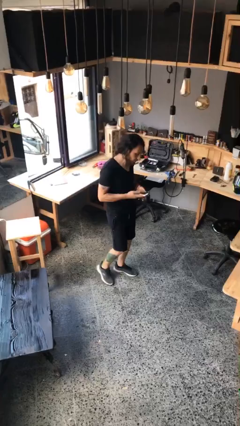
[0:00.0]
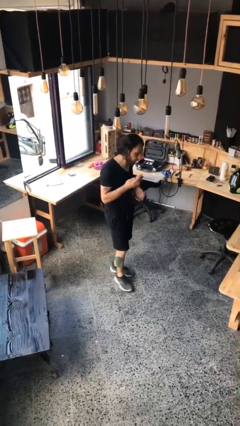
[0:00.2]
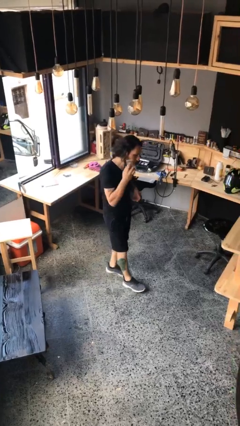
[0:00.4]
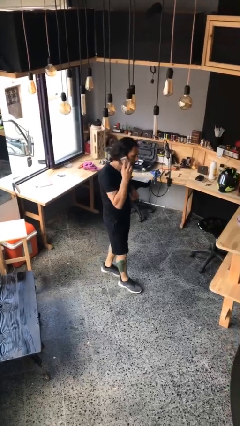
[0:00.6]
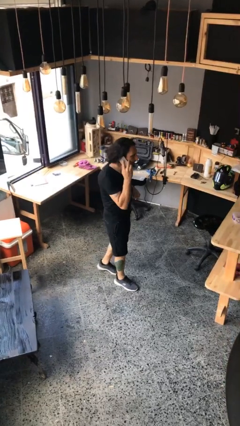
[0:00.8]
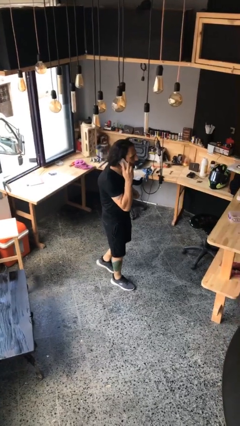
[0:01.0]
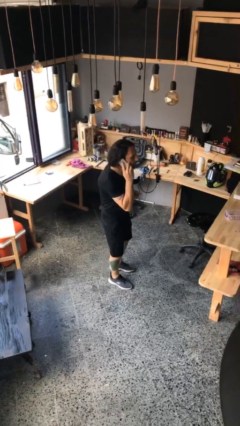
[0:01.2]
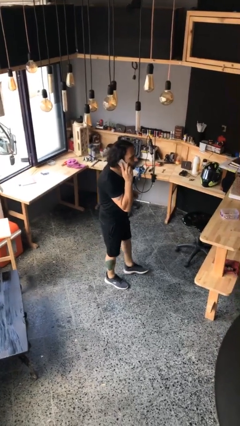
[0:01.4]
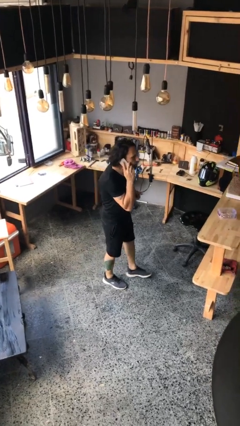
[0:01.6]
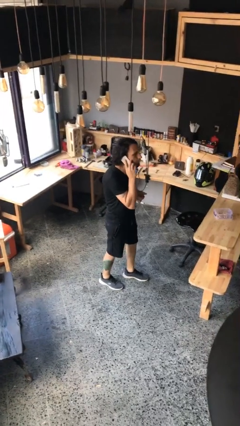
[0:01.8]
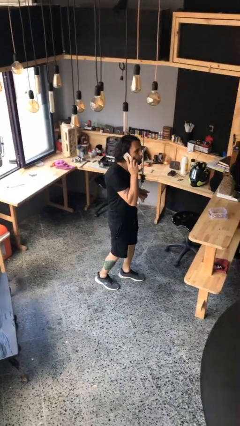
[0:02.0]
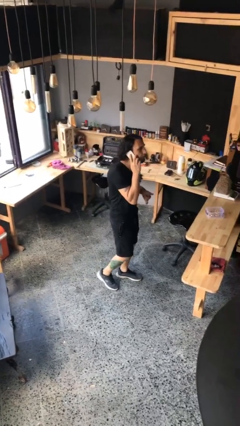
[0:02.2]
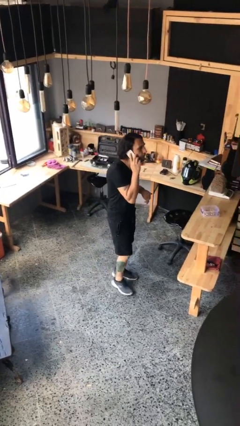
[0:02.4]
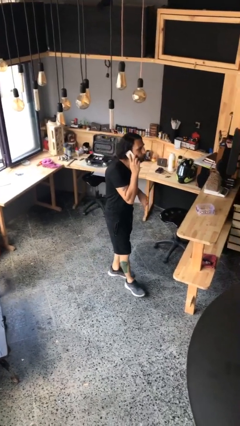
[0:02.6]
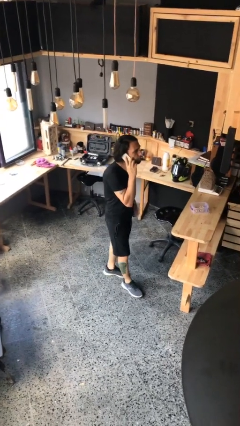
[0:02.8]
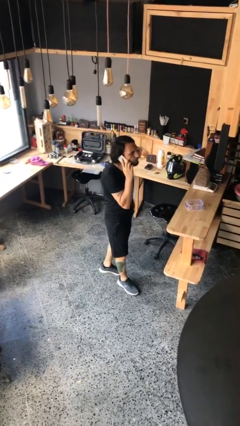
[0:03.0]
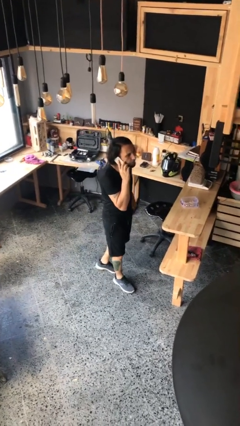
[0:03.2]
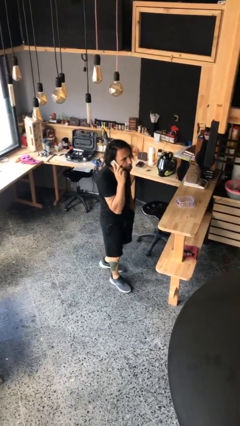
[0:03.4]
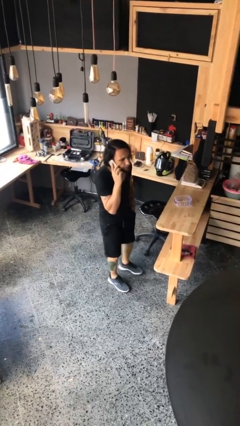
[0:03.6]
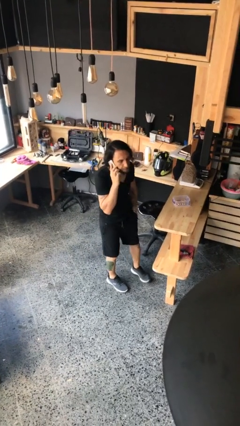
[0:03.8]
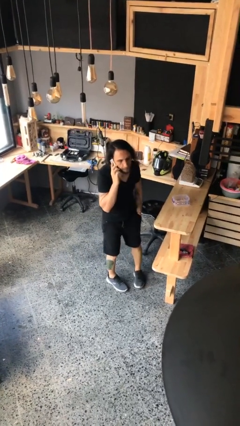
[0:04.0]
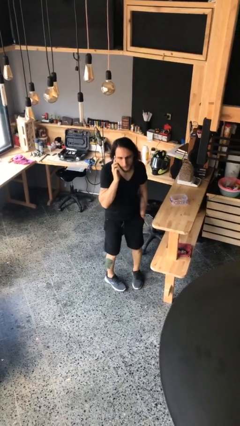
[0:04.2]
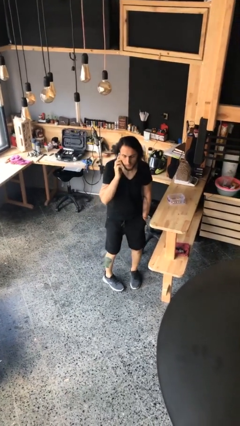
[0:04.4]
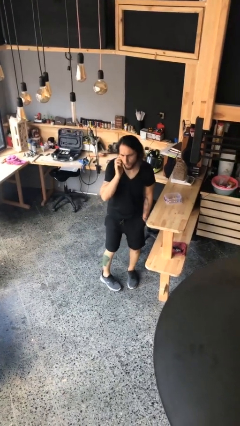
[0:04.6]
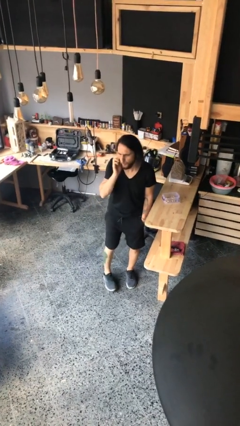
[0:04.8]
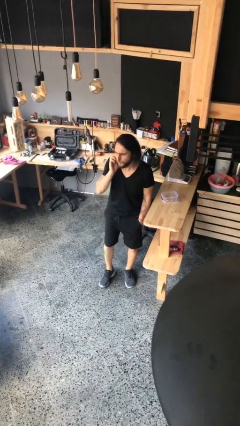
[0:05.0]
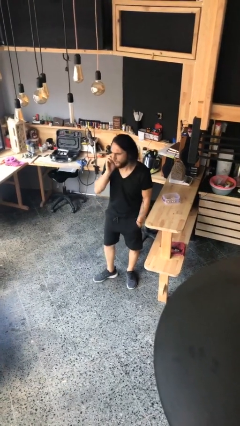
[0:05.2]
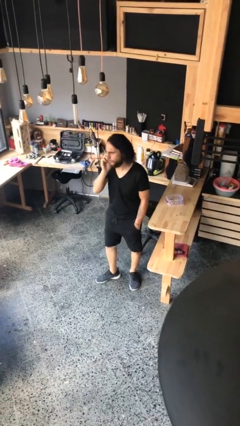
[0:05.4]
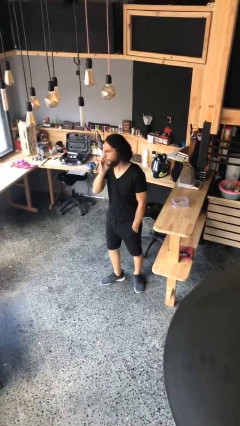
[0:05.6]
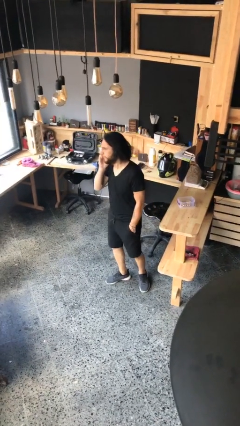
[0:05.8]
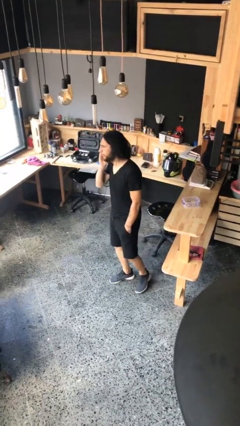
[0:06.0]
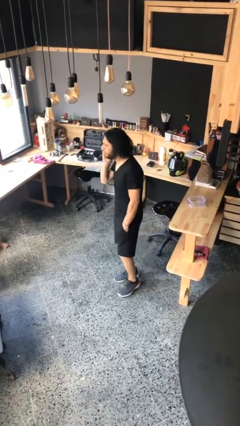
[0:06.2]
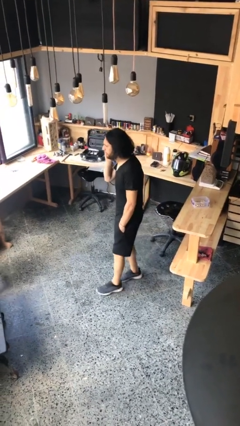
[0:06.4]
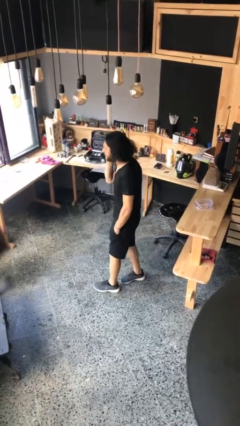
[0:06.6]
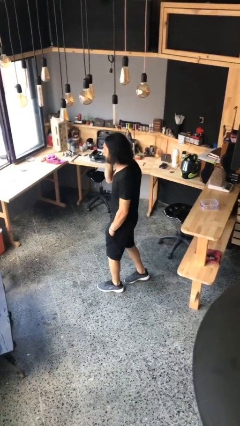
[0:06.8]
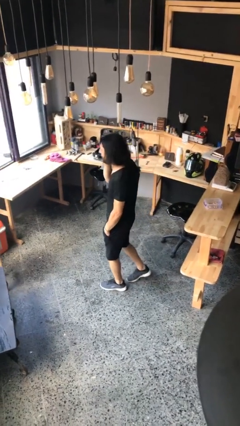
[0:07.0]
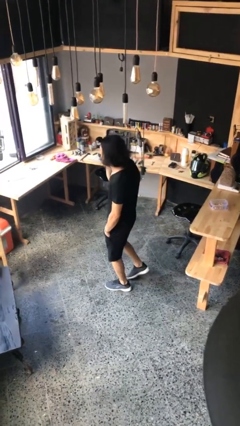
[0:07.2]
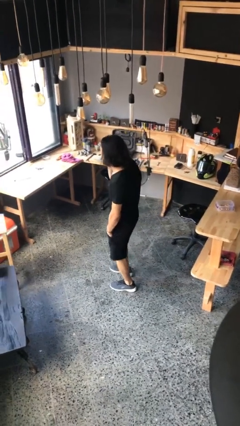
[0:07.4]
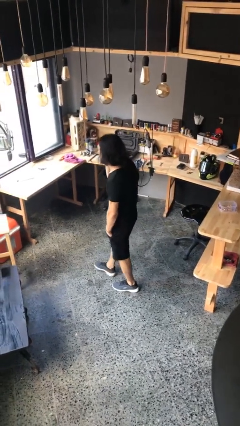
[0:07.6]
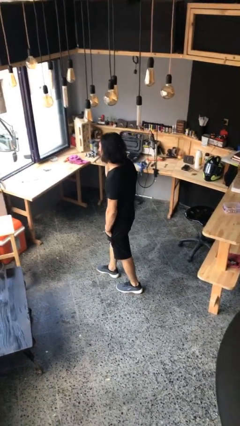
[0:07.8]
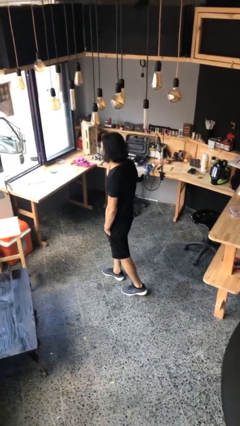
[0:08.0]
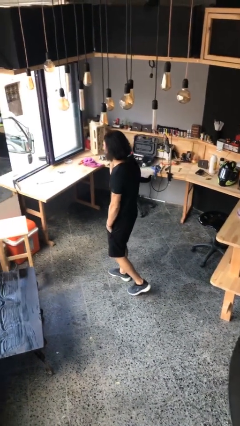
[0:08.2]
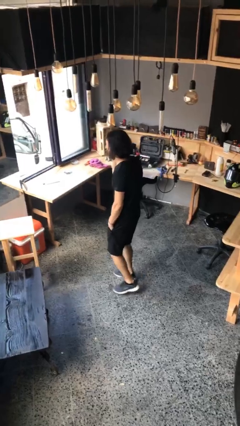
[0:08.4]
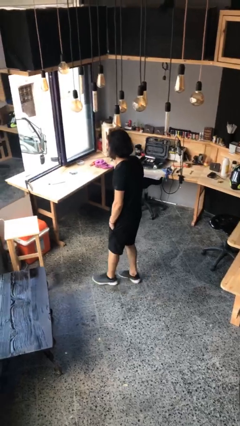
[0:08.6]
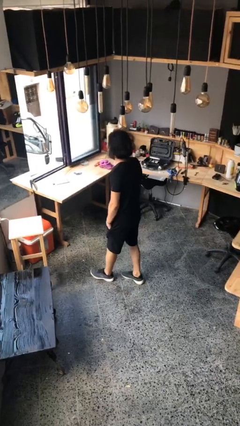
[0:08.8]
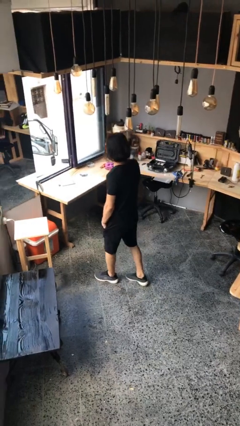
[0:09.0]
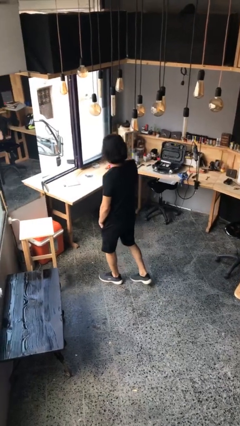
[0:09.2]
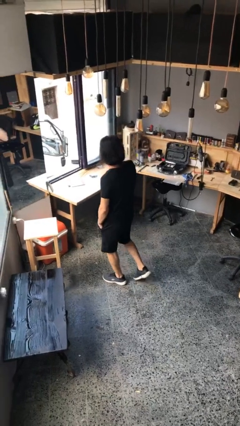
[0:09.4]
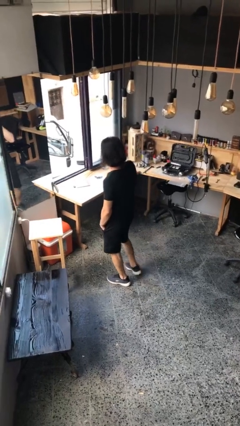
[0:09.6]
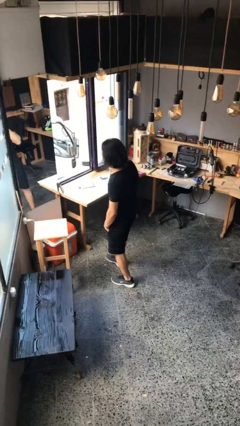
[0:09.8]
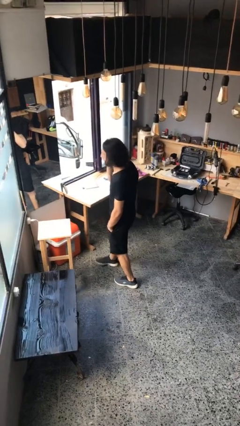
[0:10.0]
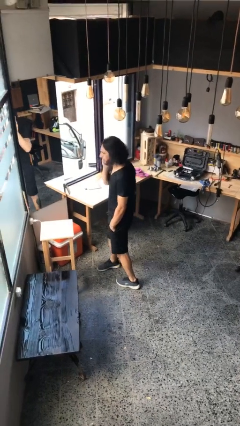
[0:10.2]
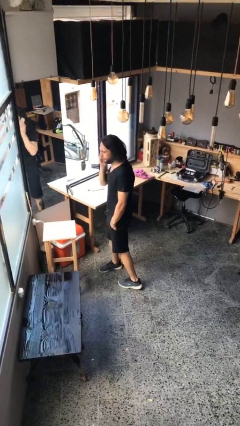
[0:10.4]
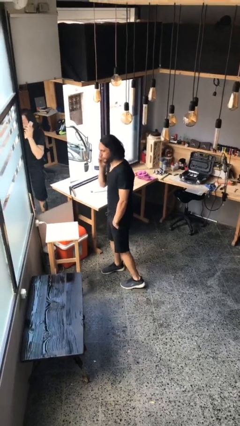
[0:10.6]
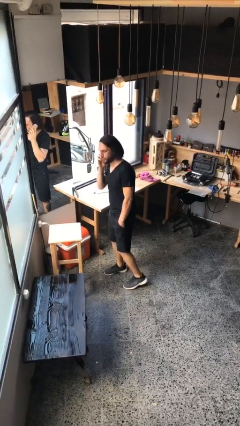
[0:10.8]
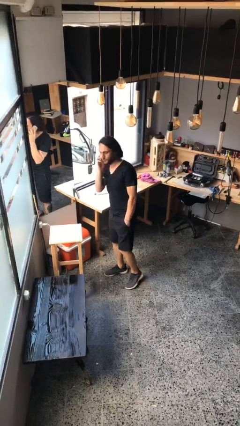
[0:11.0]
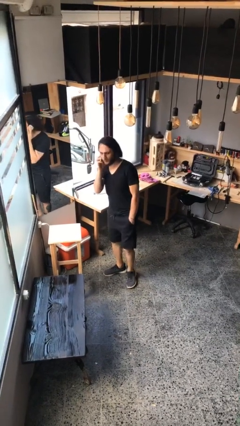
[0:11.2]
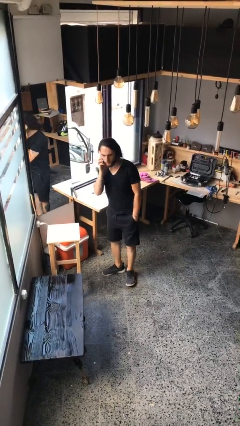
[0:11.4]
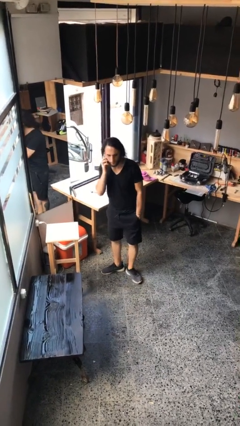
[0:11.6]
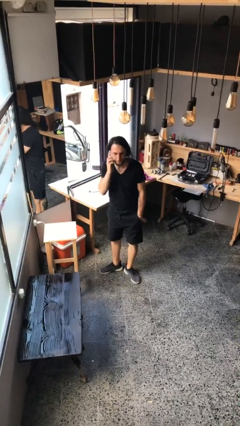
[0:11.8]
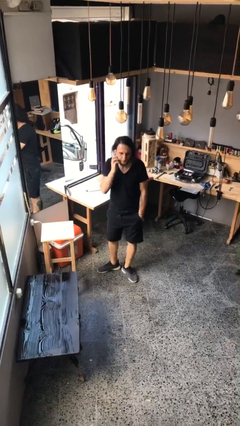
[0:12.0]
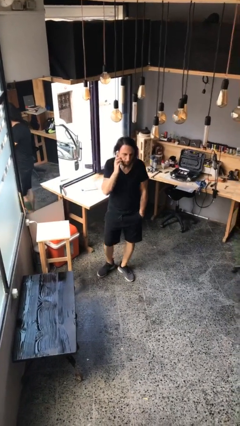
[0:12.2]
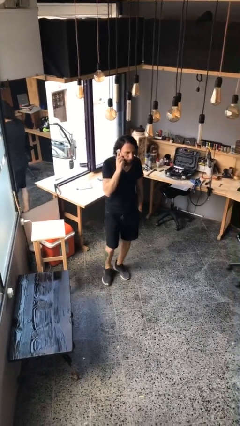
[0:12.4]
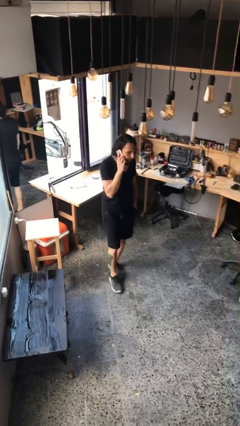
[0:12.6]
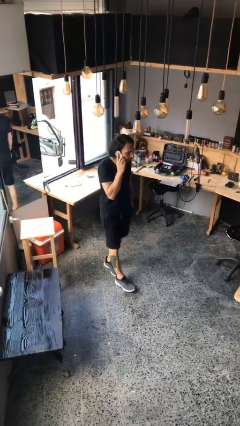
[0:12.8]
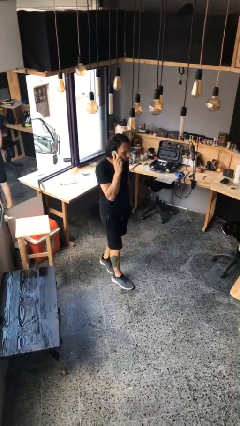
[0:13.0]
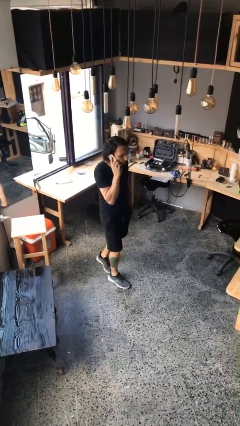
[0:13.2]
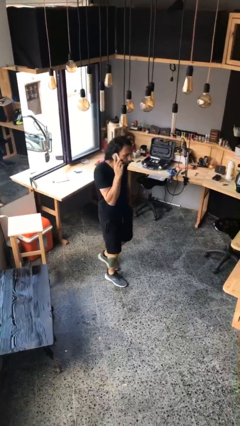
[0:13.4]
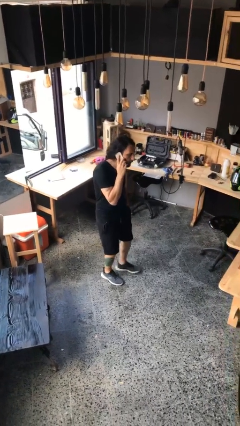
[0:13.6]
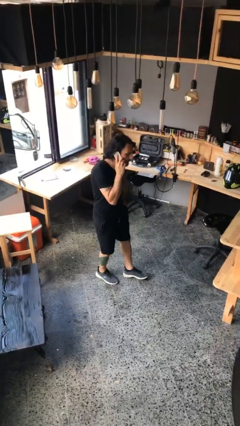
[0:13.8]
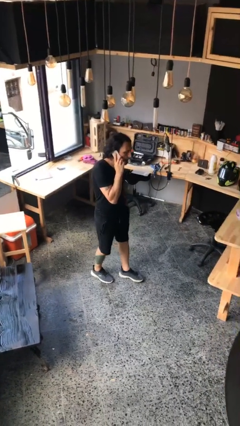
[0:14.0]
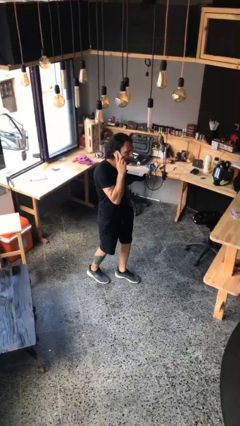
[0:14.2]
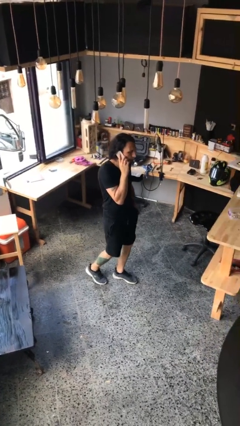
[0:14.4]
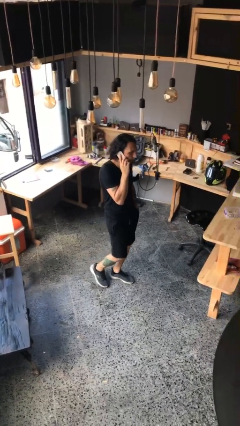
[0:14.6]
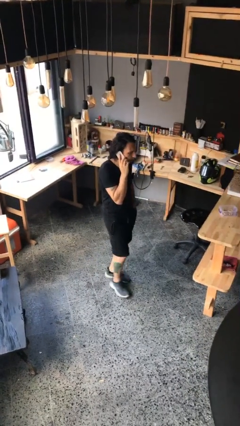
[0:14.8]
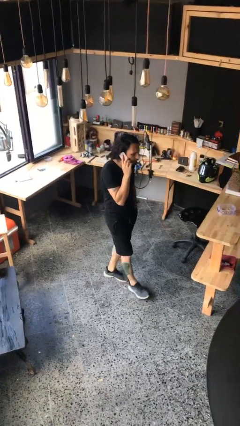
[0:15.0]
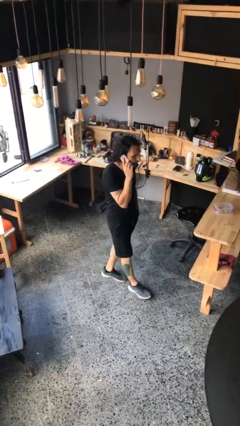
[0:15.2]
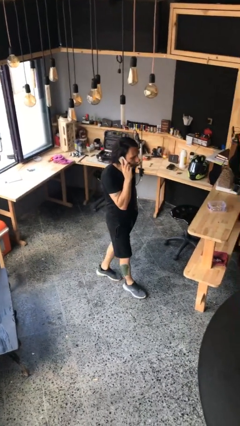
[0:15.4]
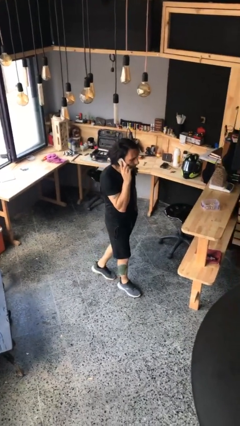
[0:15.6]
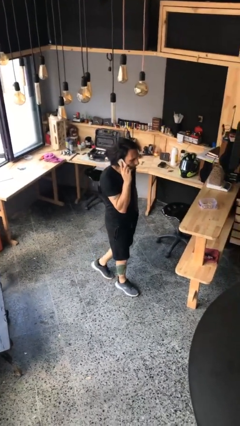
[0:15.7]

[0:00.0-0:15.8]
person talks on phone

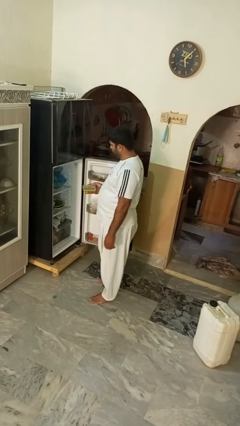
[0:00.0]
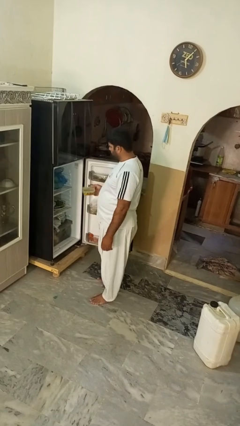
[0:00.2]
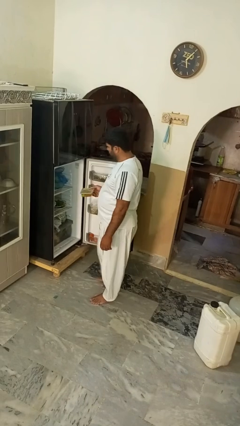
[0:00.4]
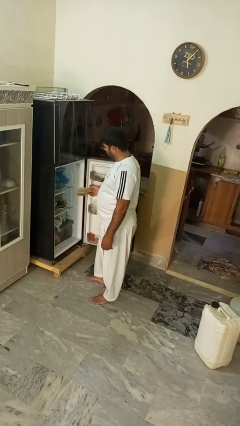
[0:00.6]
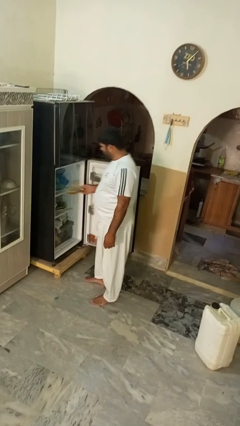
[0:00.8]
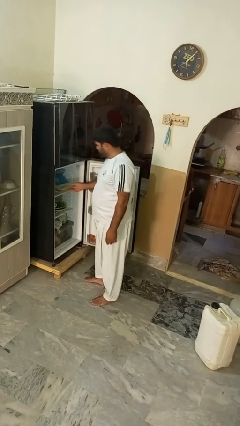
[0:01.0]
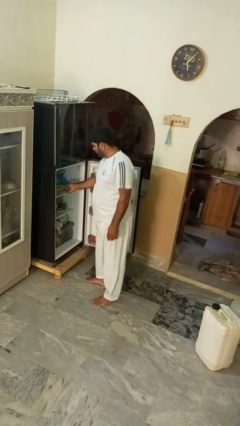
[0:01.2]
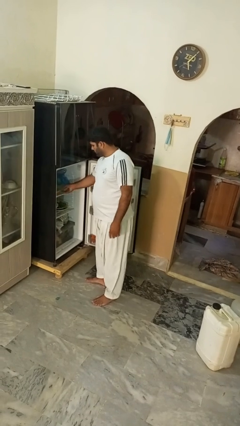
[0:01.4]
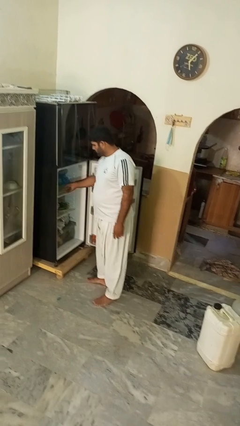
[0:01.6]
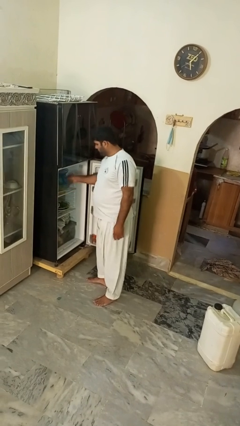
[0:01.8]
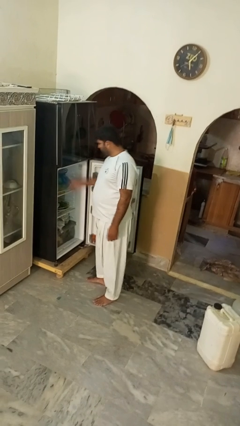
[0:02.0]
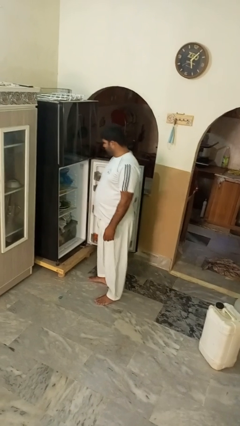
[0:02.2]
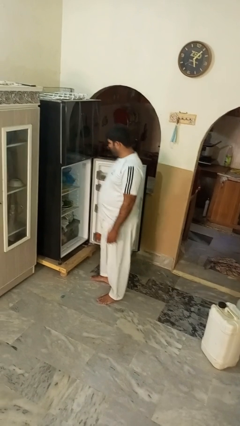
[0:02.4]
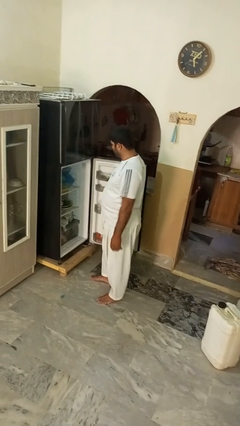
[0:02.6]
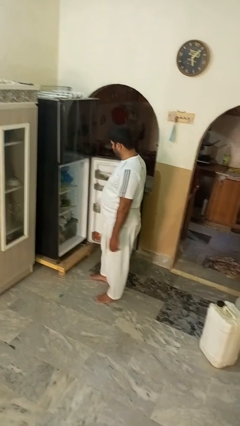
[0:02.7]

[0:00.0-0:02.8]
person puts object into refrigerator
